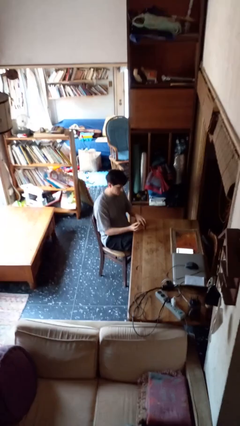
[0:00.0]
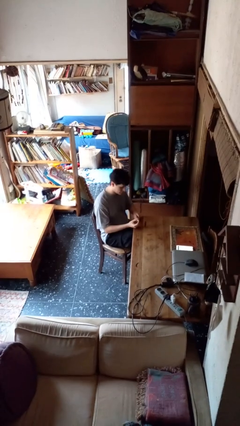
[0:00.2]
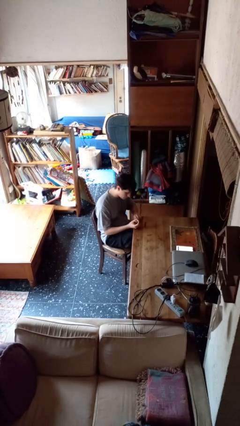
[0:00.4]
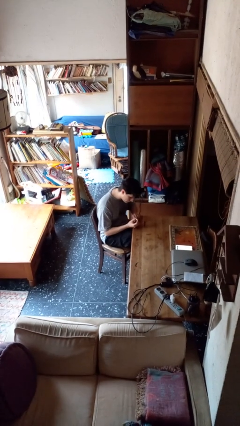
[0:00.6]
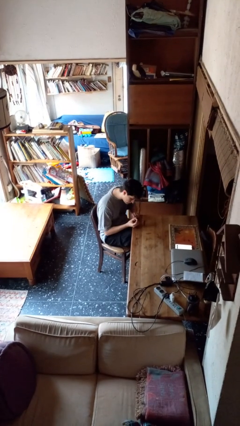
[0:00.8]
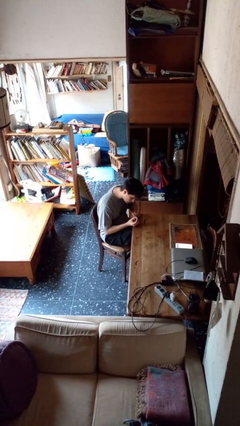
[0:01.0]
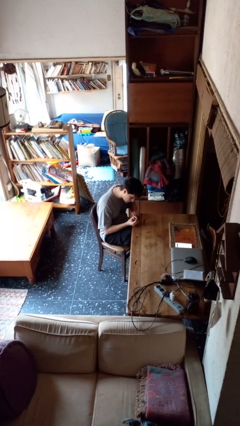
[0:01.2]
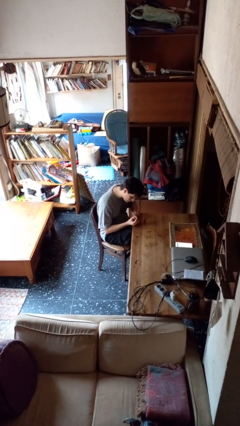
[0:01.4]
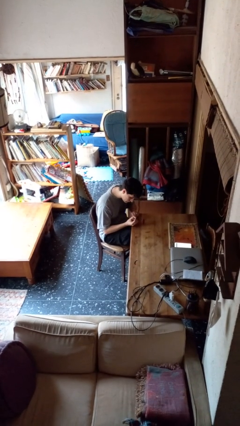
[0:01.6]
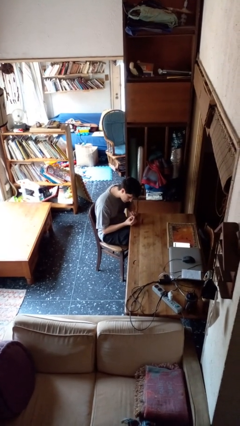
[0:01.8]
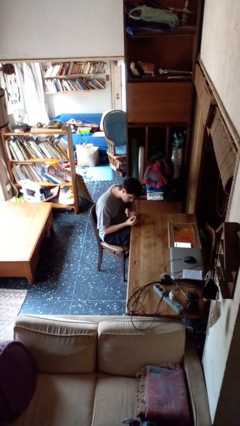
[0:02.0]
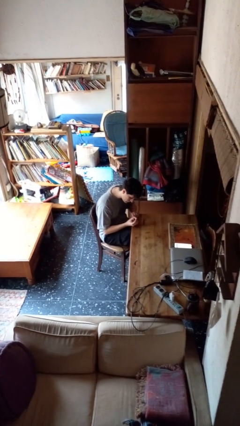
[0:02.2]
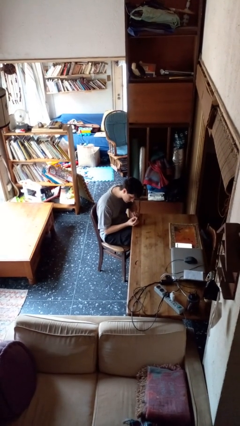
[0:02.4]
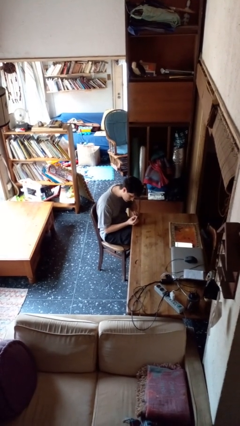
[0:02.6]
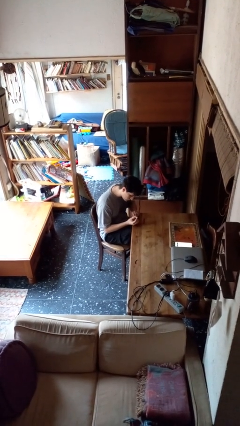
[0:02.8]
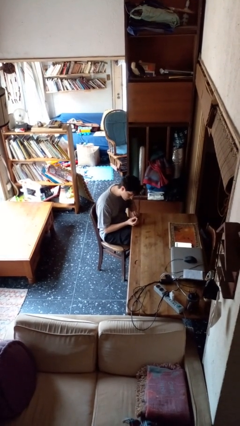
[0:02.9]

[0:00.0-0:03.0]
person paints fingernails

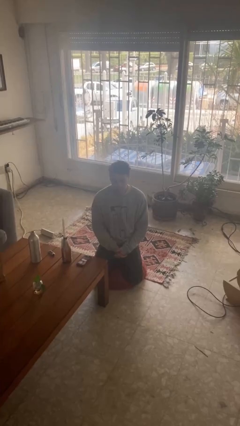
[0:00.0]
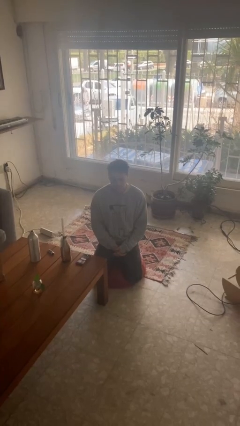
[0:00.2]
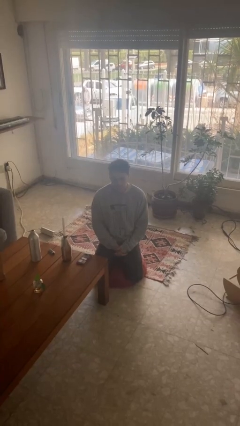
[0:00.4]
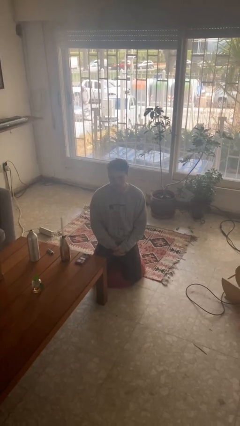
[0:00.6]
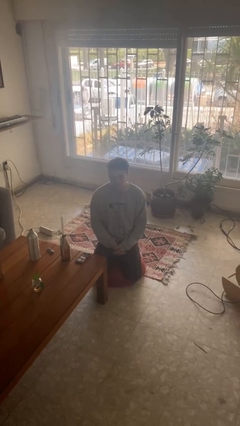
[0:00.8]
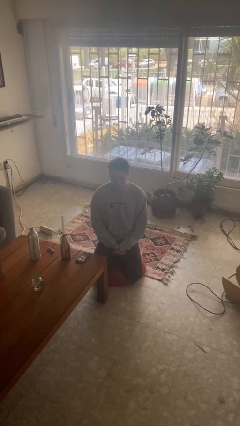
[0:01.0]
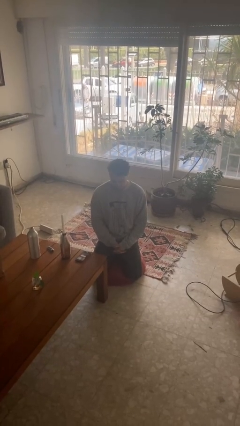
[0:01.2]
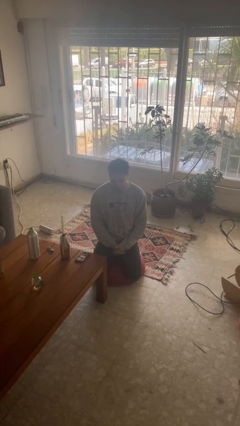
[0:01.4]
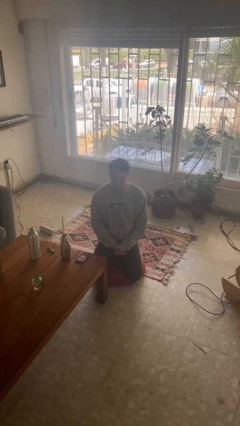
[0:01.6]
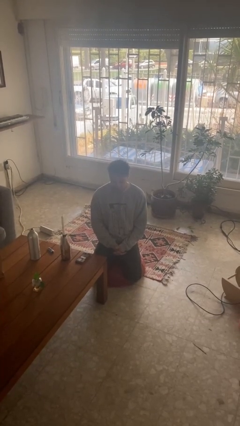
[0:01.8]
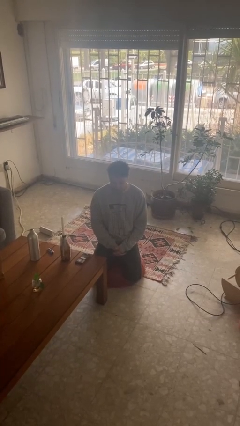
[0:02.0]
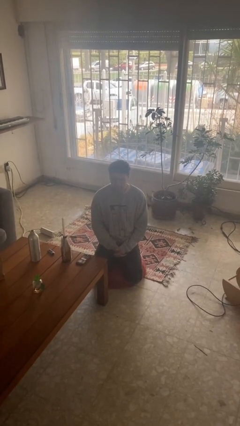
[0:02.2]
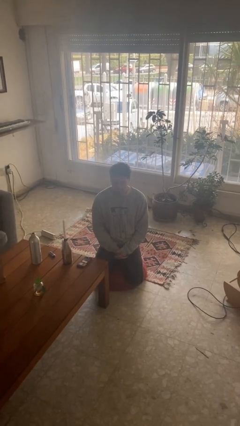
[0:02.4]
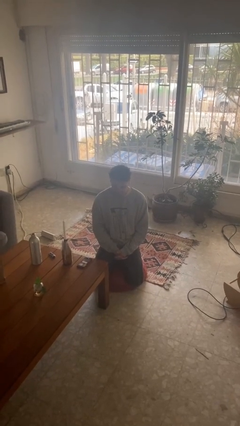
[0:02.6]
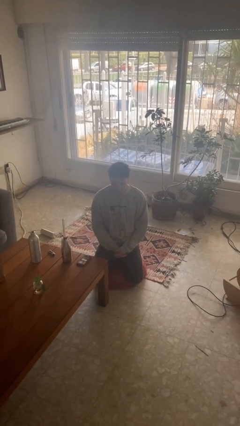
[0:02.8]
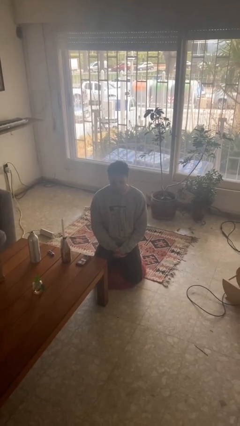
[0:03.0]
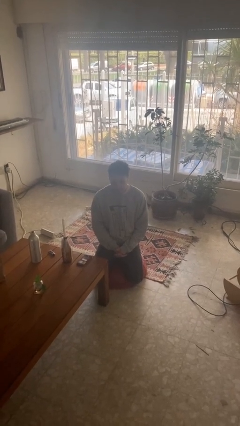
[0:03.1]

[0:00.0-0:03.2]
person nods head

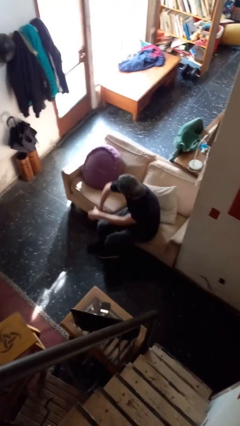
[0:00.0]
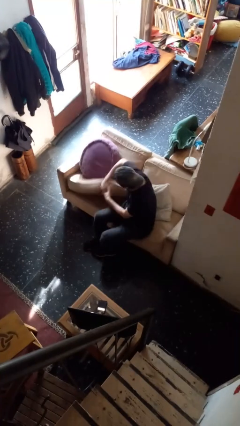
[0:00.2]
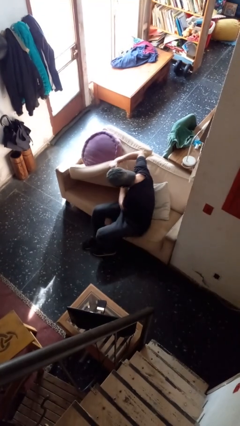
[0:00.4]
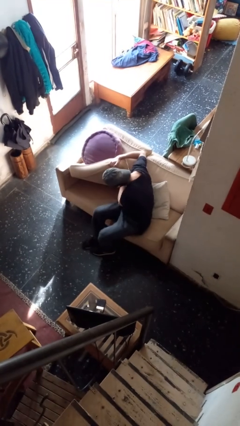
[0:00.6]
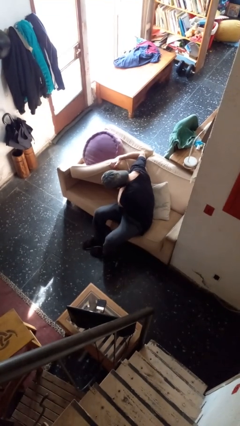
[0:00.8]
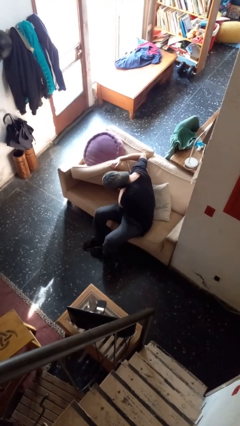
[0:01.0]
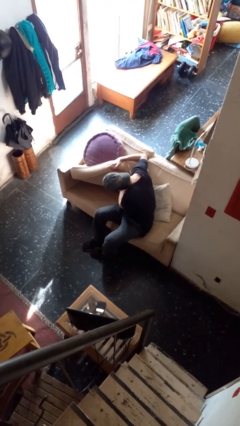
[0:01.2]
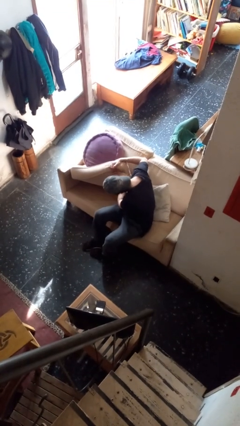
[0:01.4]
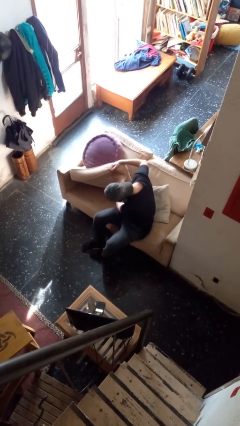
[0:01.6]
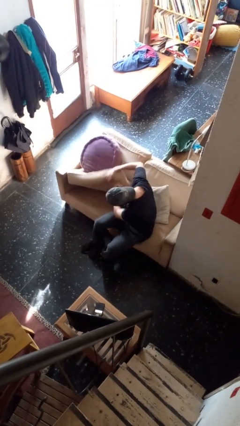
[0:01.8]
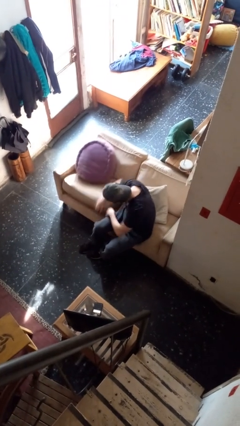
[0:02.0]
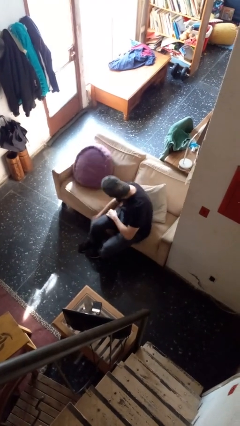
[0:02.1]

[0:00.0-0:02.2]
person searches in couch

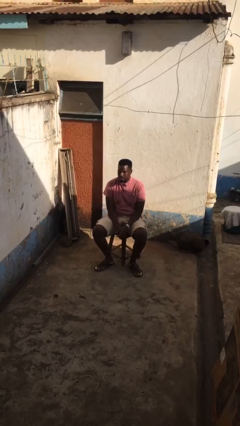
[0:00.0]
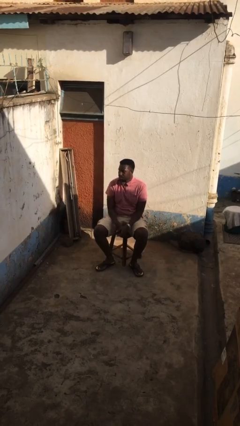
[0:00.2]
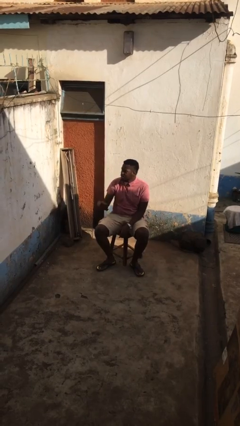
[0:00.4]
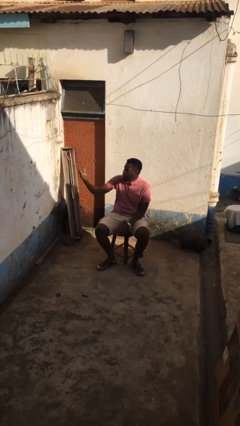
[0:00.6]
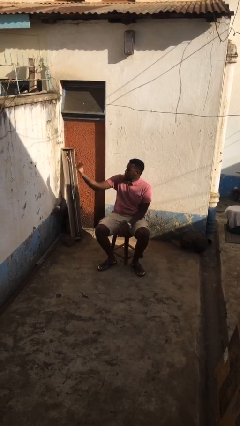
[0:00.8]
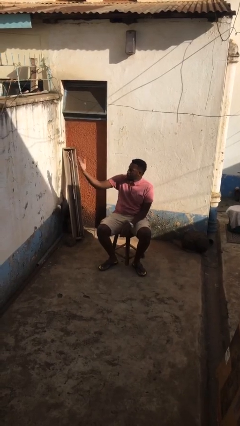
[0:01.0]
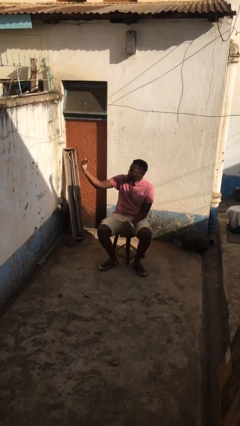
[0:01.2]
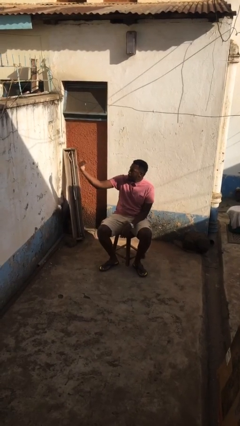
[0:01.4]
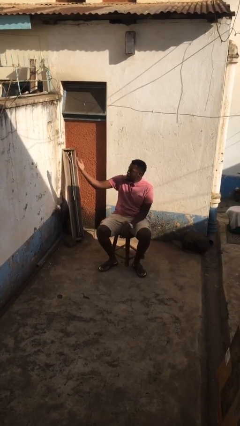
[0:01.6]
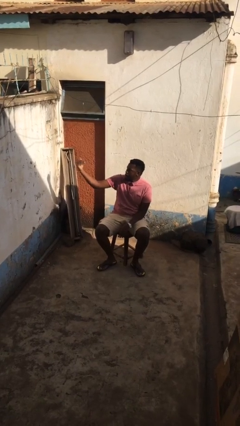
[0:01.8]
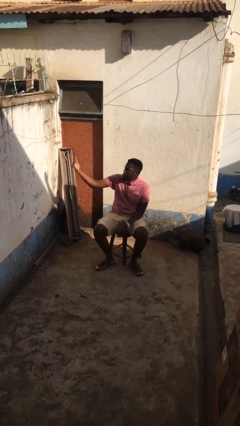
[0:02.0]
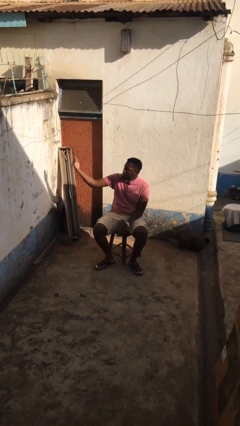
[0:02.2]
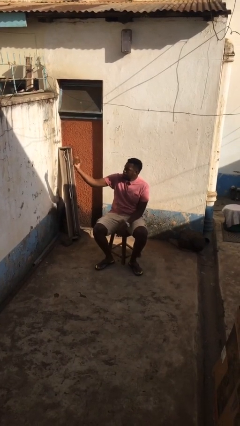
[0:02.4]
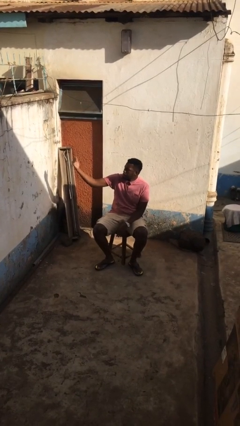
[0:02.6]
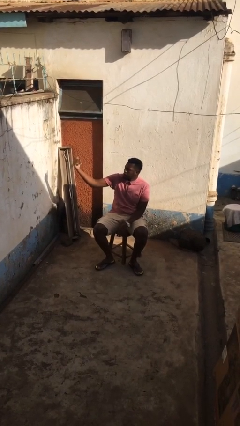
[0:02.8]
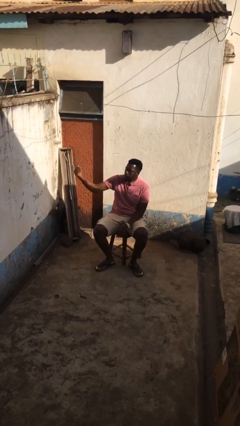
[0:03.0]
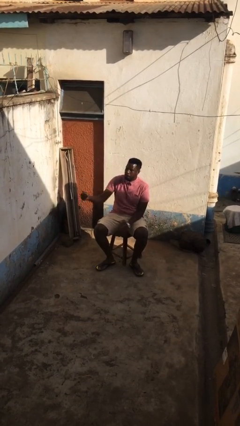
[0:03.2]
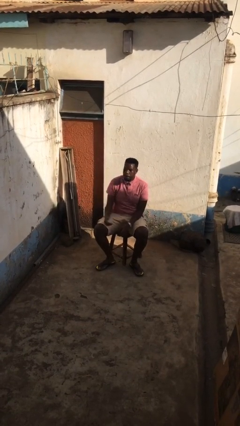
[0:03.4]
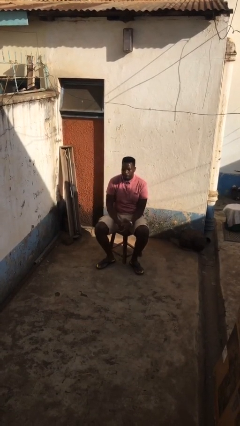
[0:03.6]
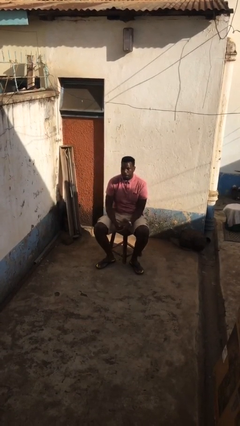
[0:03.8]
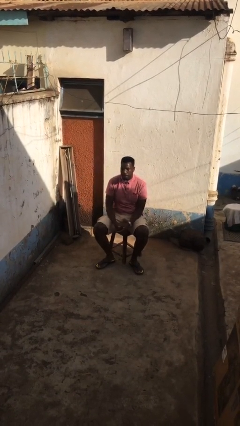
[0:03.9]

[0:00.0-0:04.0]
person gestures come here

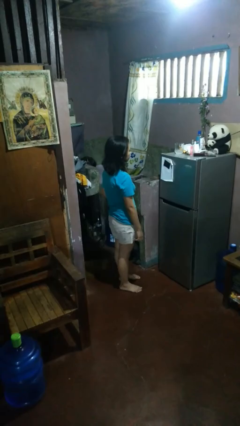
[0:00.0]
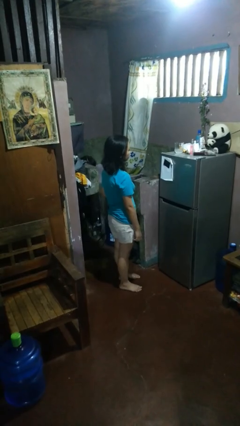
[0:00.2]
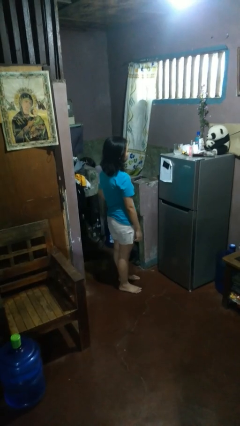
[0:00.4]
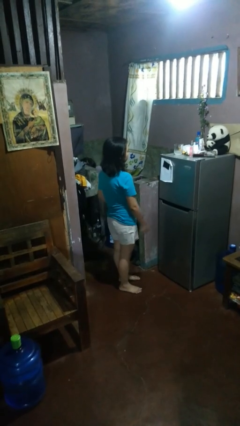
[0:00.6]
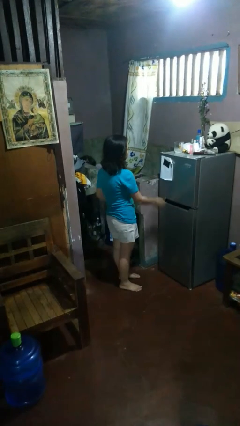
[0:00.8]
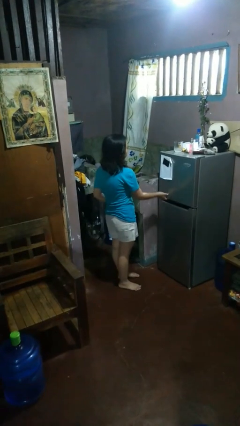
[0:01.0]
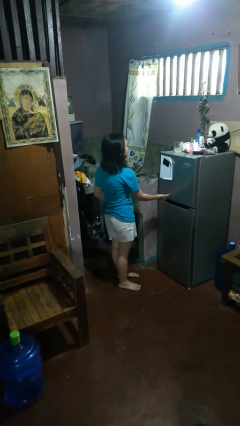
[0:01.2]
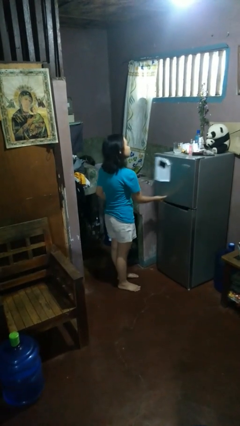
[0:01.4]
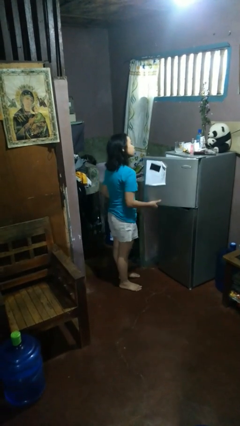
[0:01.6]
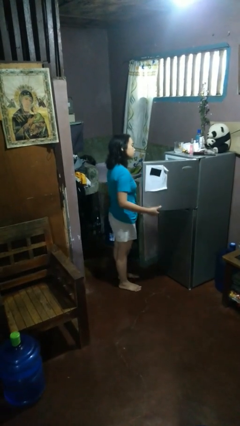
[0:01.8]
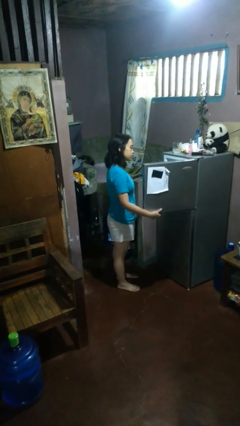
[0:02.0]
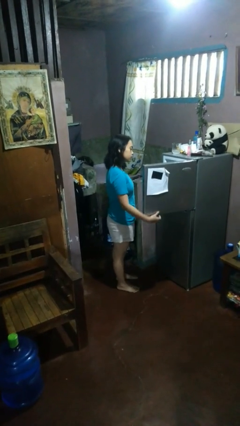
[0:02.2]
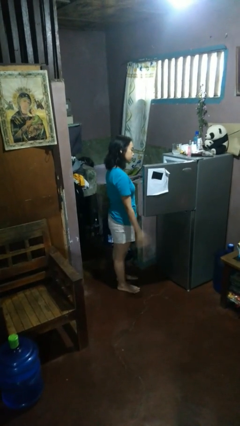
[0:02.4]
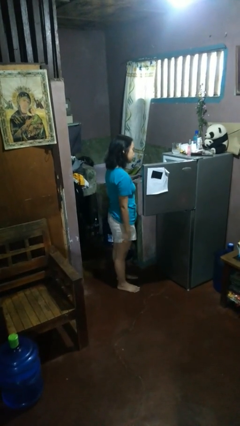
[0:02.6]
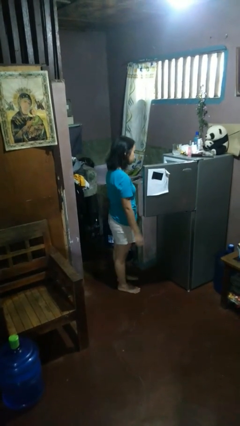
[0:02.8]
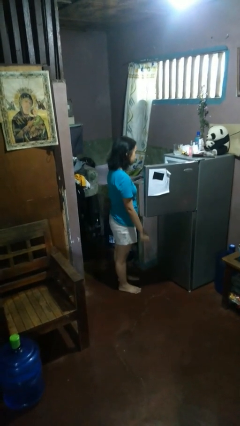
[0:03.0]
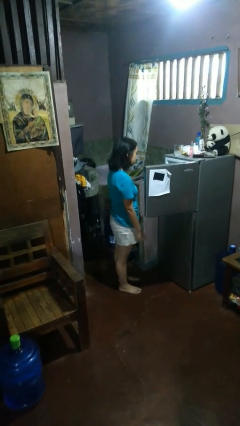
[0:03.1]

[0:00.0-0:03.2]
person opens refrigerator

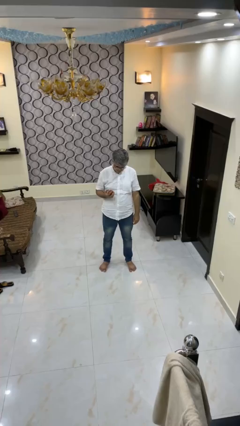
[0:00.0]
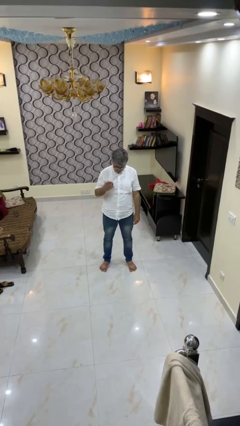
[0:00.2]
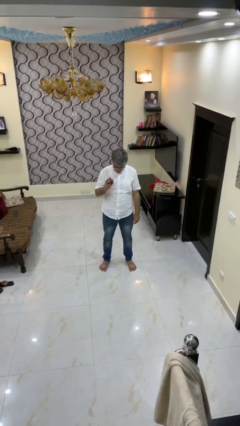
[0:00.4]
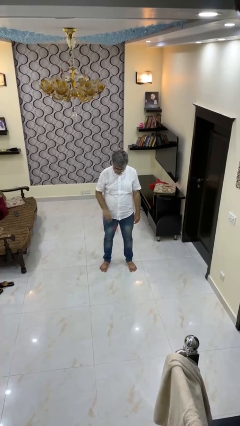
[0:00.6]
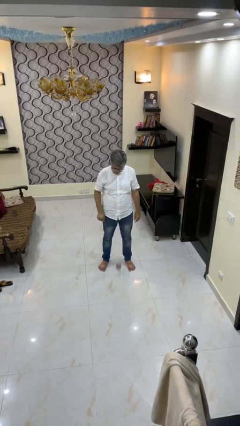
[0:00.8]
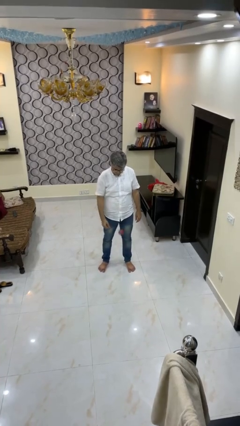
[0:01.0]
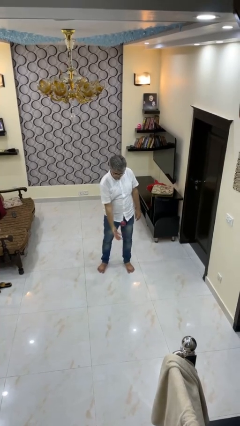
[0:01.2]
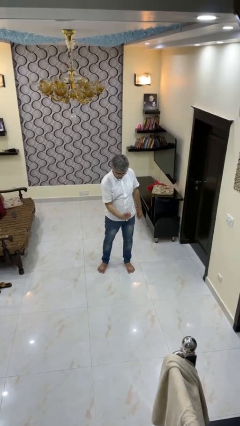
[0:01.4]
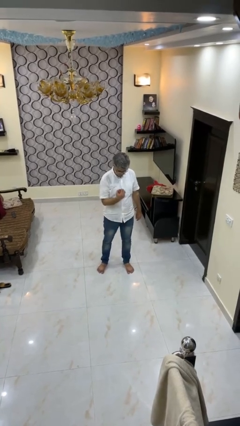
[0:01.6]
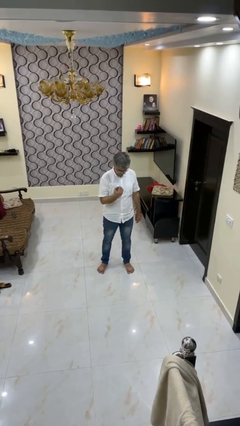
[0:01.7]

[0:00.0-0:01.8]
person bounces ball on floor
